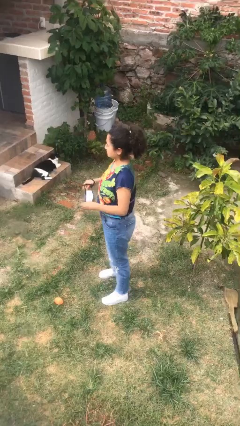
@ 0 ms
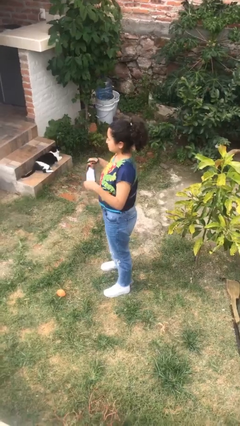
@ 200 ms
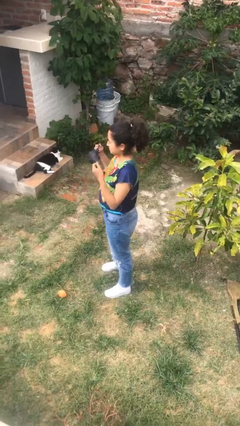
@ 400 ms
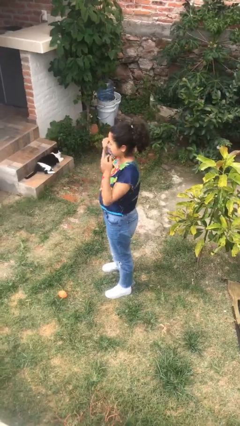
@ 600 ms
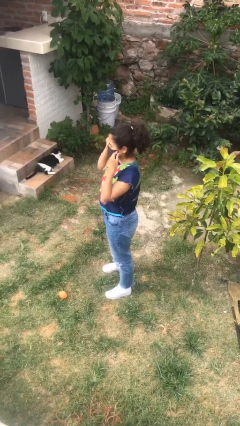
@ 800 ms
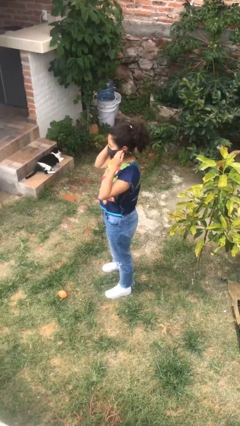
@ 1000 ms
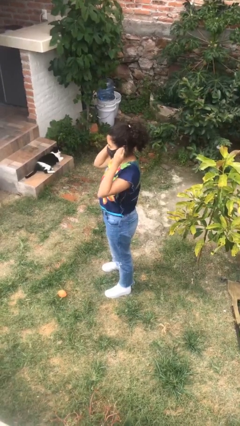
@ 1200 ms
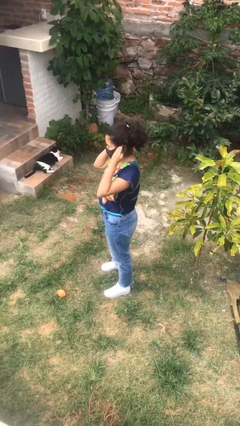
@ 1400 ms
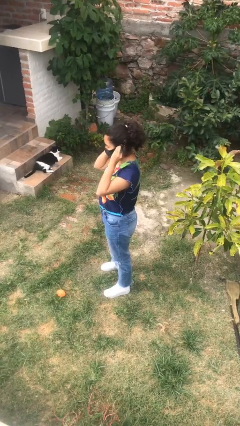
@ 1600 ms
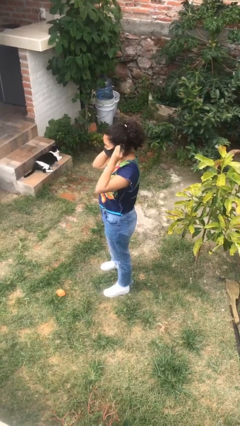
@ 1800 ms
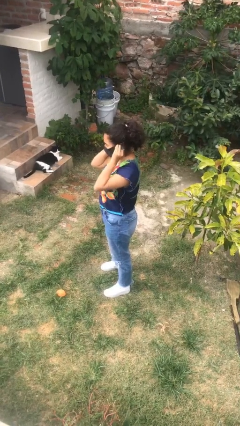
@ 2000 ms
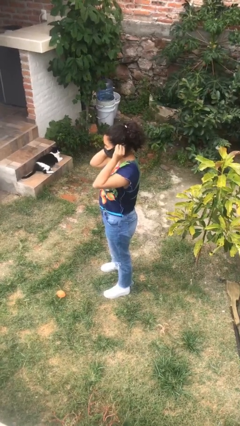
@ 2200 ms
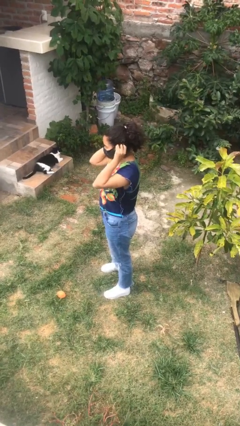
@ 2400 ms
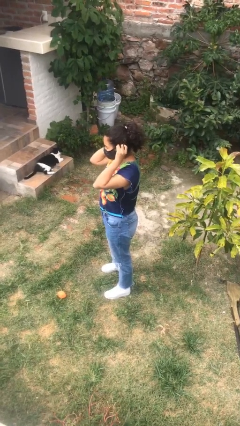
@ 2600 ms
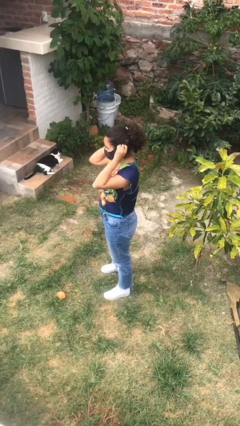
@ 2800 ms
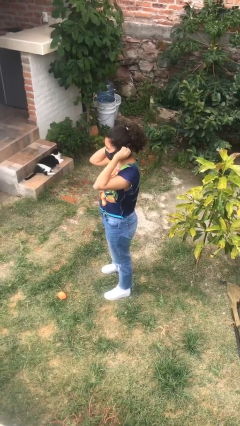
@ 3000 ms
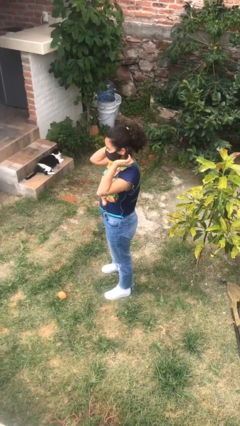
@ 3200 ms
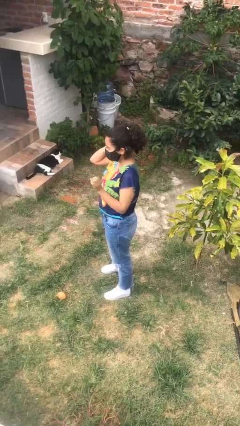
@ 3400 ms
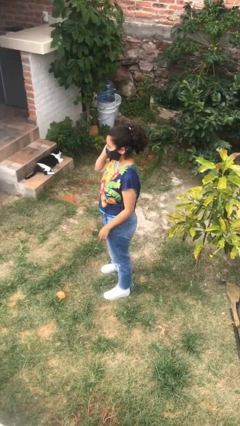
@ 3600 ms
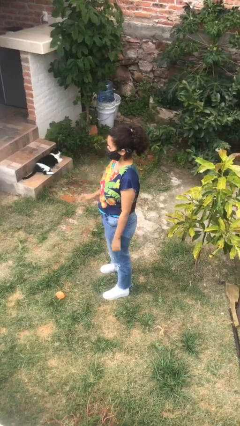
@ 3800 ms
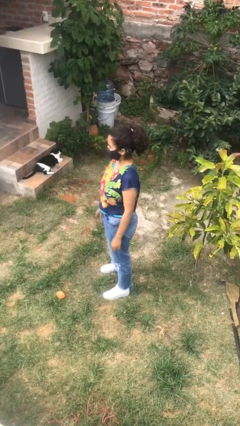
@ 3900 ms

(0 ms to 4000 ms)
person puts on facemask

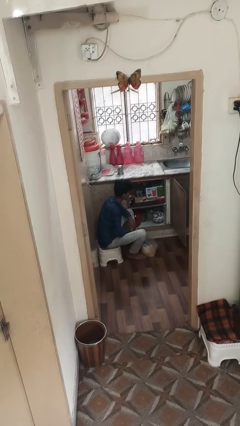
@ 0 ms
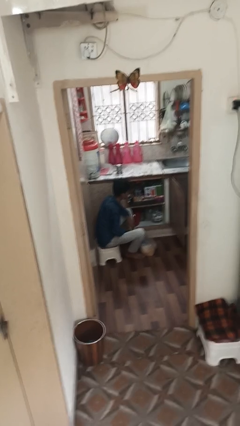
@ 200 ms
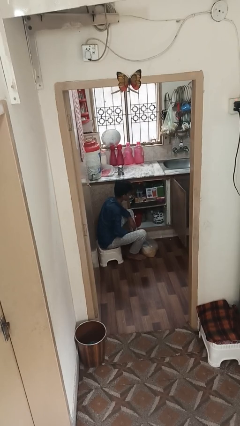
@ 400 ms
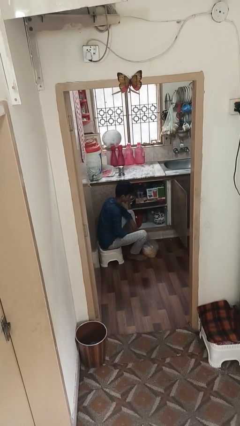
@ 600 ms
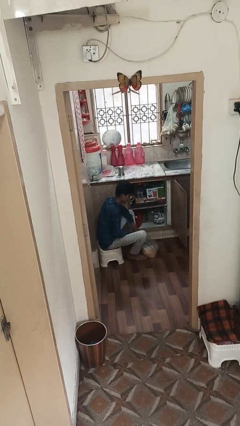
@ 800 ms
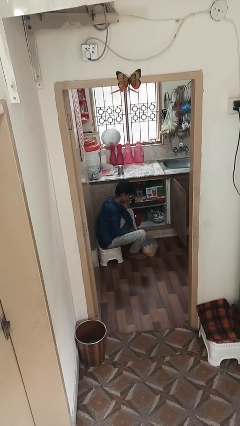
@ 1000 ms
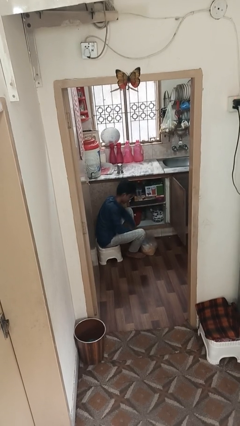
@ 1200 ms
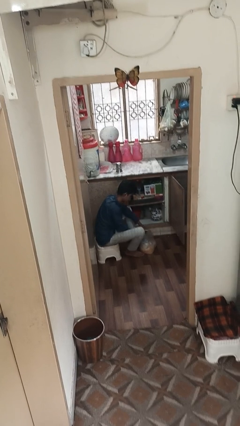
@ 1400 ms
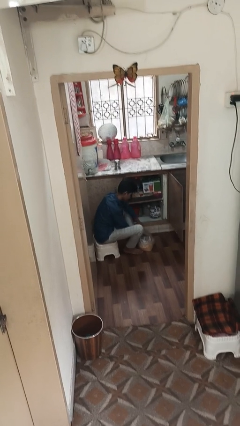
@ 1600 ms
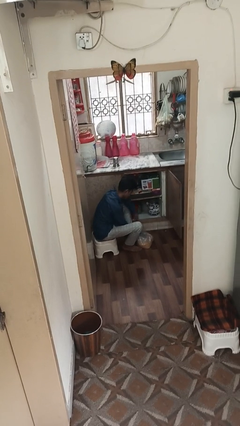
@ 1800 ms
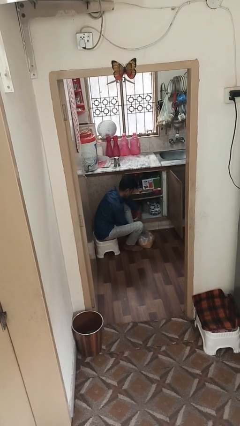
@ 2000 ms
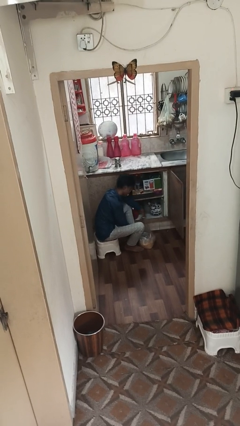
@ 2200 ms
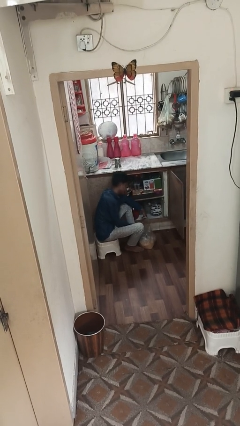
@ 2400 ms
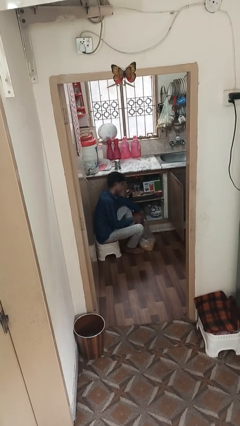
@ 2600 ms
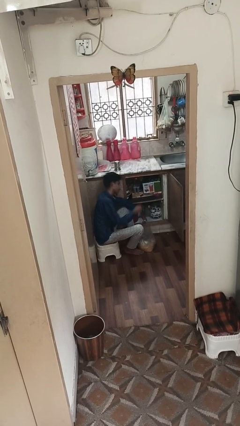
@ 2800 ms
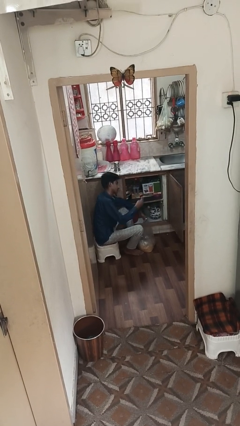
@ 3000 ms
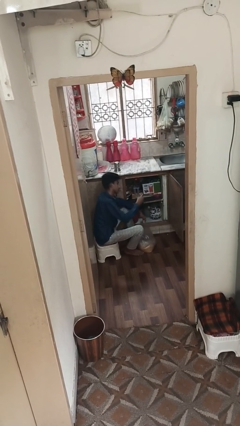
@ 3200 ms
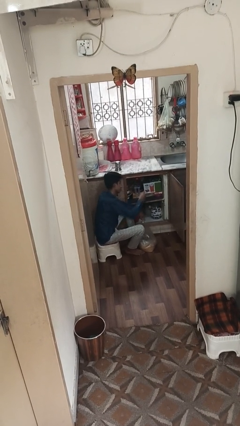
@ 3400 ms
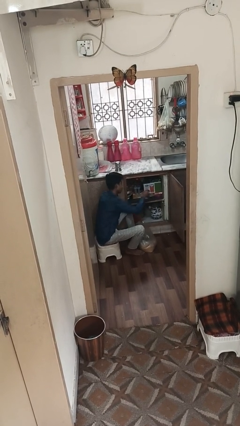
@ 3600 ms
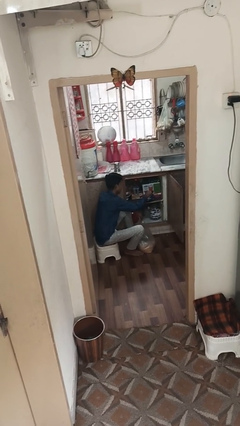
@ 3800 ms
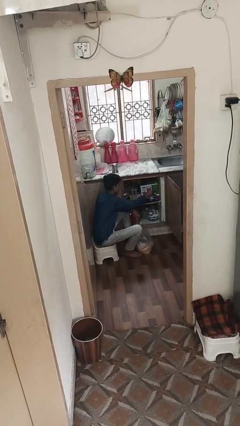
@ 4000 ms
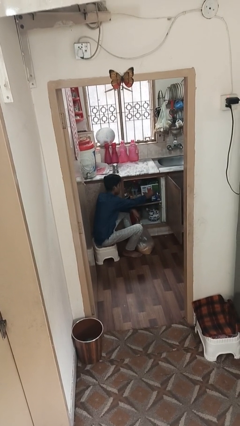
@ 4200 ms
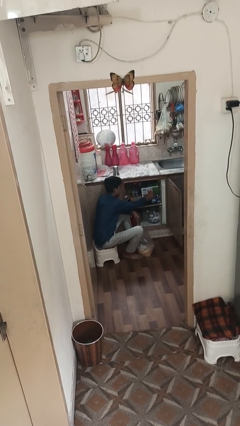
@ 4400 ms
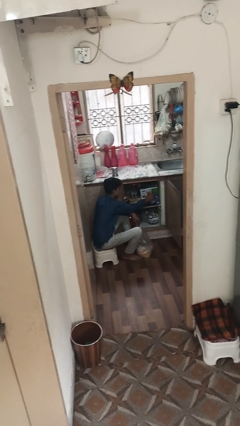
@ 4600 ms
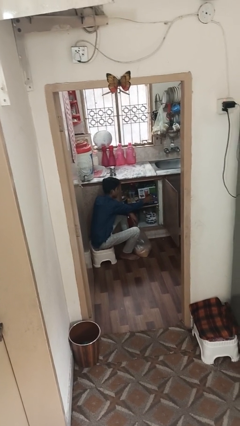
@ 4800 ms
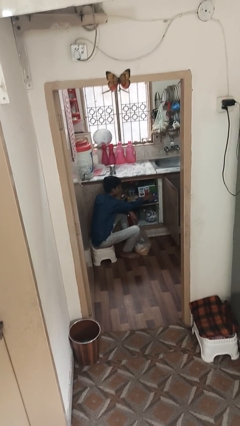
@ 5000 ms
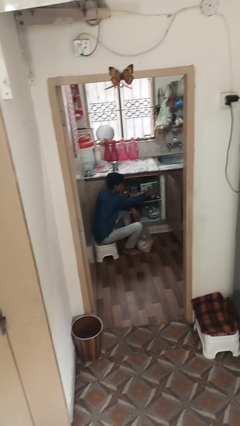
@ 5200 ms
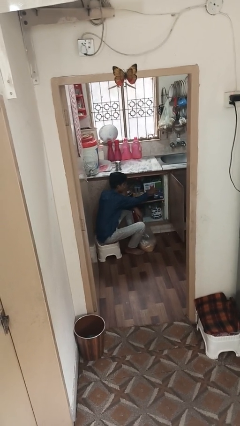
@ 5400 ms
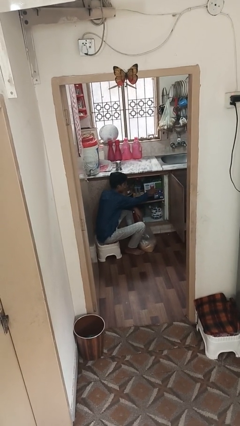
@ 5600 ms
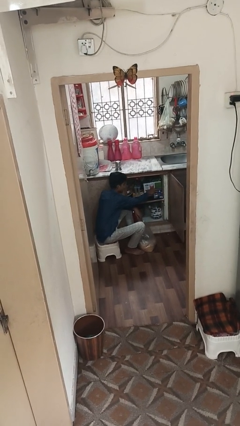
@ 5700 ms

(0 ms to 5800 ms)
person loads groceries into cabinet

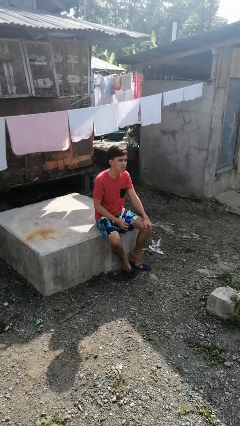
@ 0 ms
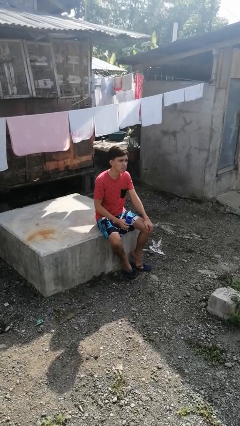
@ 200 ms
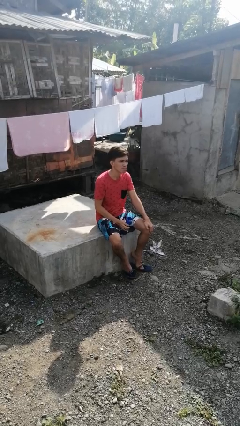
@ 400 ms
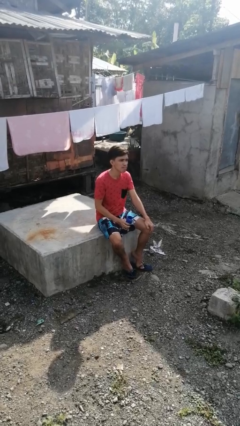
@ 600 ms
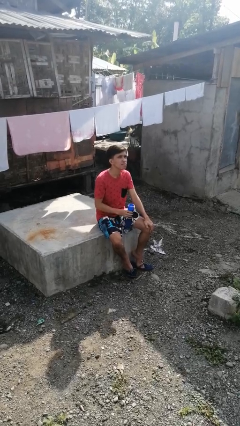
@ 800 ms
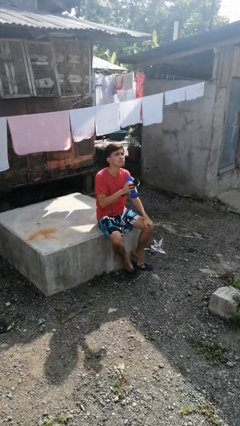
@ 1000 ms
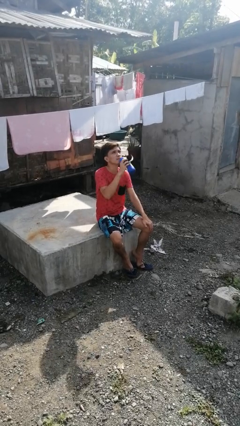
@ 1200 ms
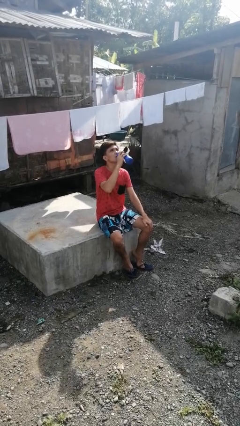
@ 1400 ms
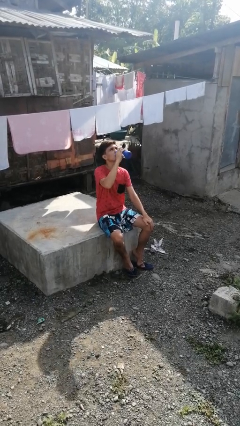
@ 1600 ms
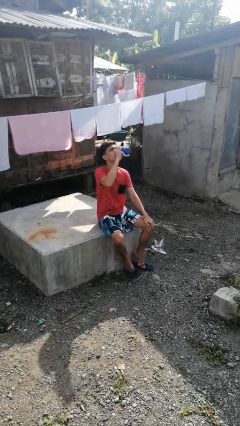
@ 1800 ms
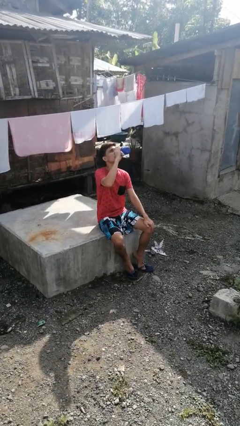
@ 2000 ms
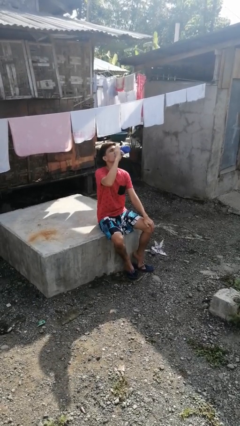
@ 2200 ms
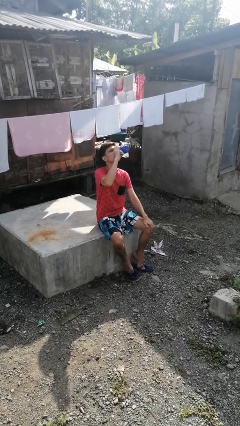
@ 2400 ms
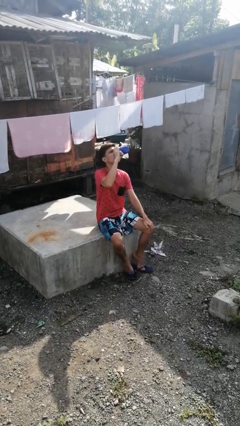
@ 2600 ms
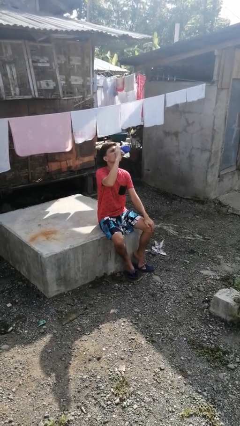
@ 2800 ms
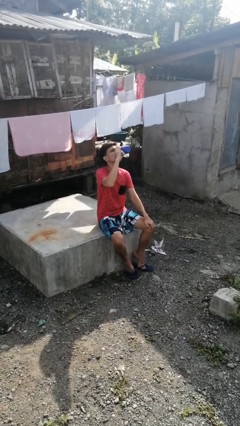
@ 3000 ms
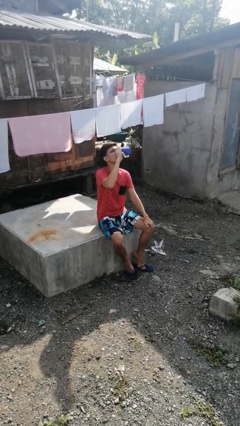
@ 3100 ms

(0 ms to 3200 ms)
person drinks from bottle

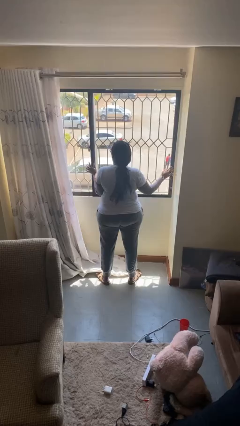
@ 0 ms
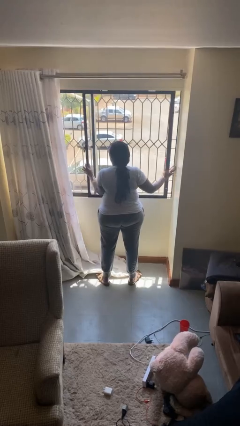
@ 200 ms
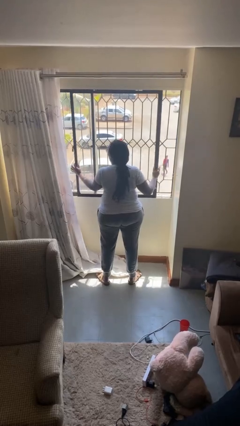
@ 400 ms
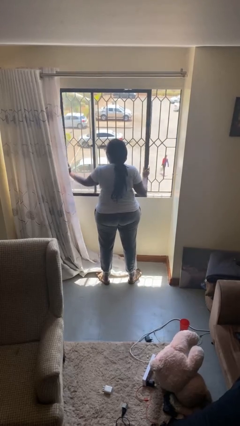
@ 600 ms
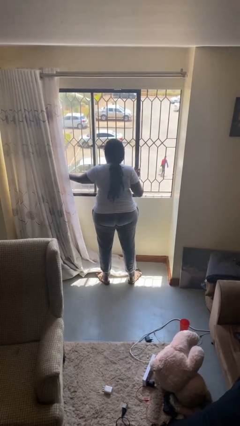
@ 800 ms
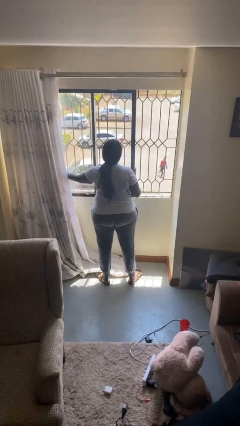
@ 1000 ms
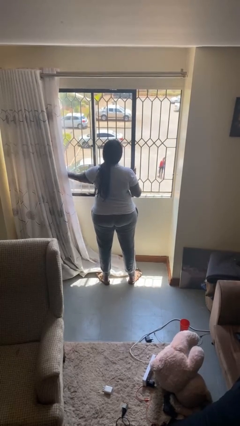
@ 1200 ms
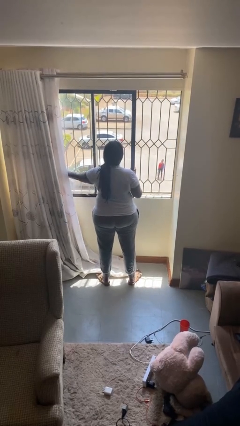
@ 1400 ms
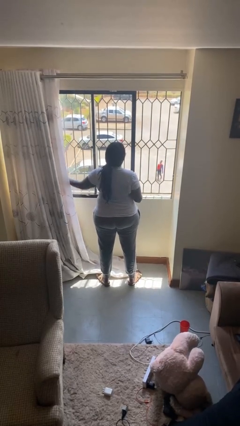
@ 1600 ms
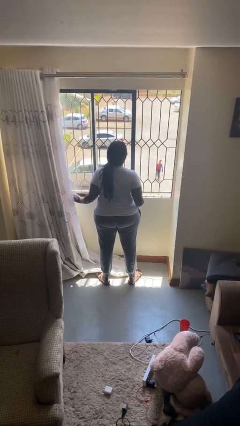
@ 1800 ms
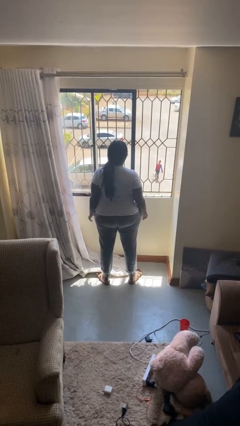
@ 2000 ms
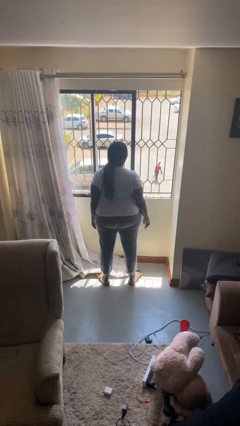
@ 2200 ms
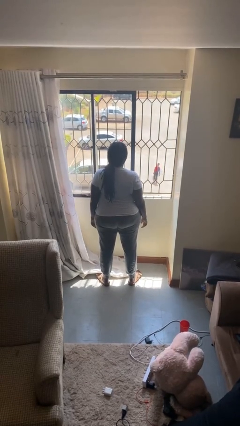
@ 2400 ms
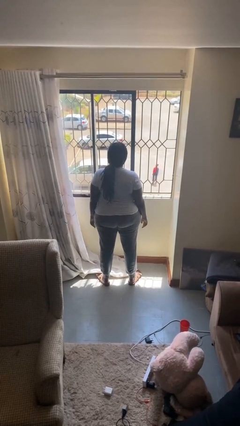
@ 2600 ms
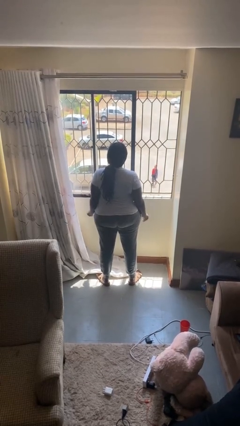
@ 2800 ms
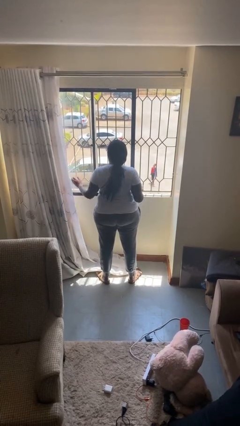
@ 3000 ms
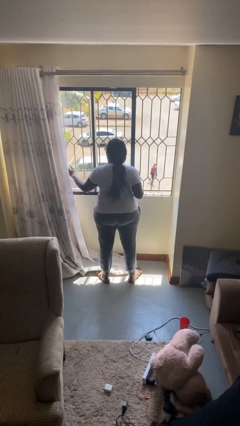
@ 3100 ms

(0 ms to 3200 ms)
person opens home window

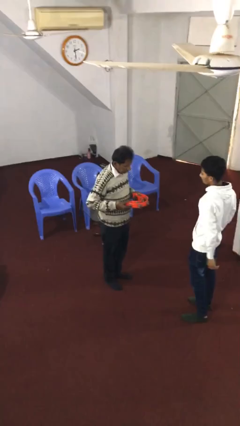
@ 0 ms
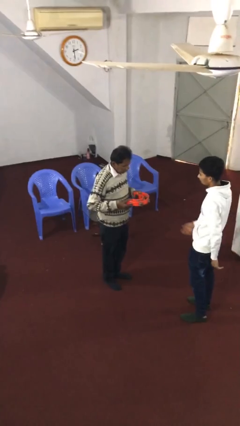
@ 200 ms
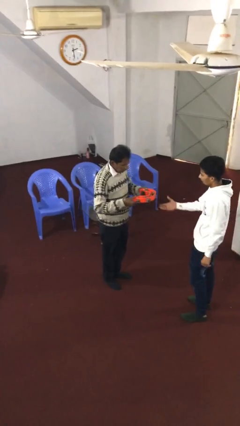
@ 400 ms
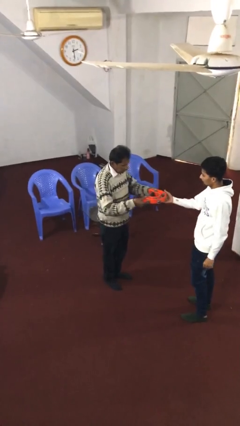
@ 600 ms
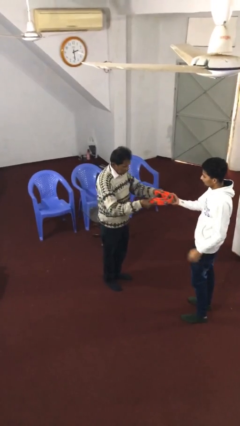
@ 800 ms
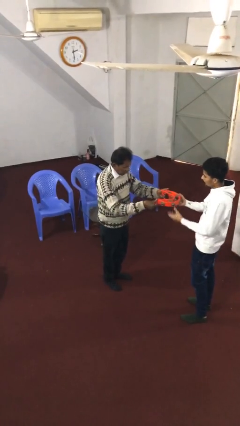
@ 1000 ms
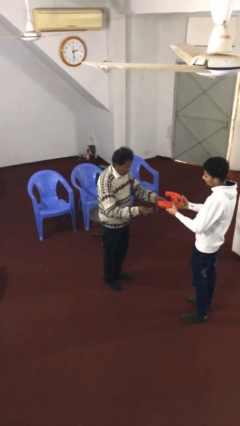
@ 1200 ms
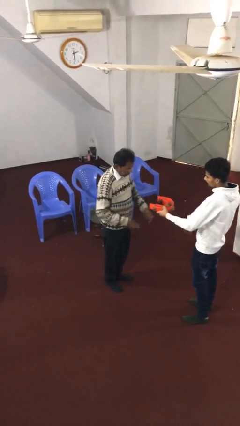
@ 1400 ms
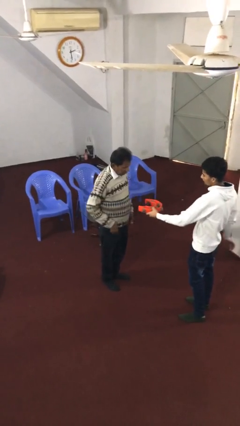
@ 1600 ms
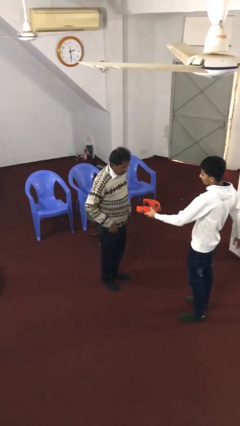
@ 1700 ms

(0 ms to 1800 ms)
person transfers object to person
